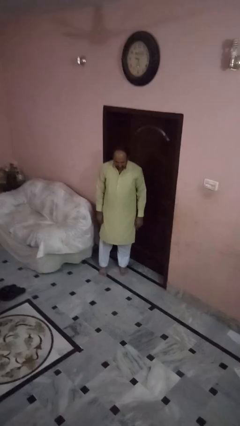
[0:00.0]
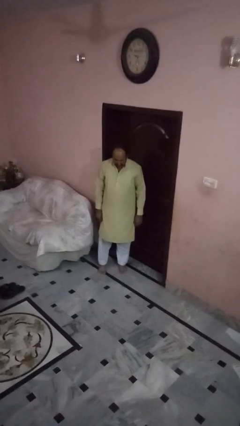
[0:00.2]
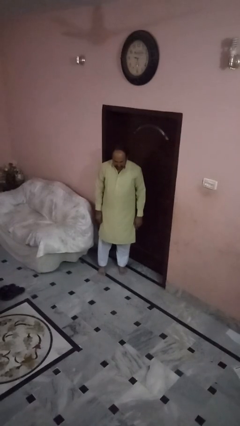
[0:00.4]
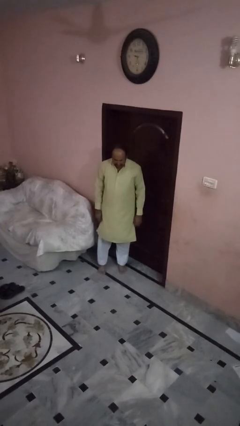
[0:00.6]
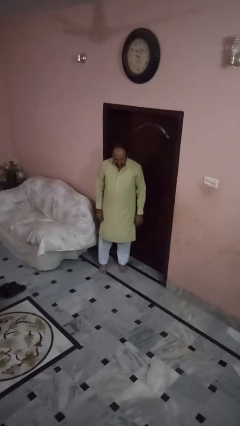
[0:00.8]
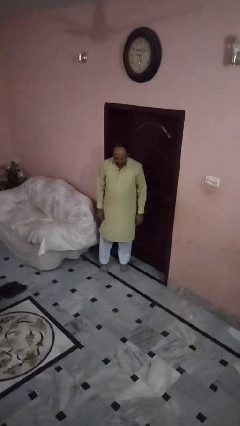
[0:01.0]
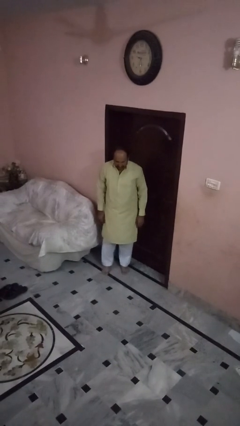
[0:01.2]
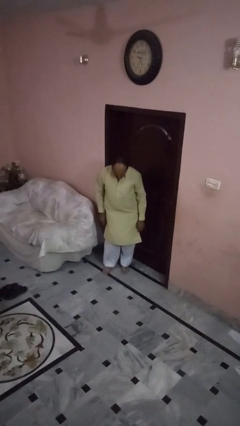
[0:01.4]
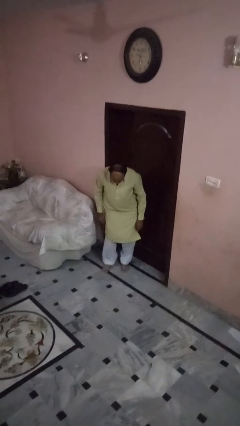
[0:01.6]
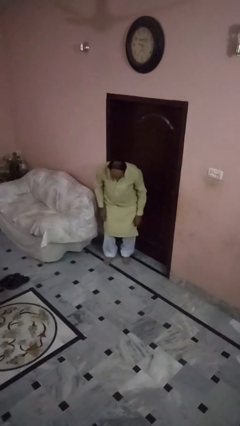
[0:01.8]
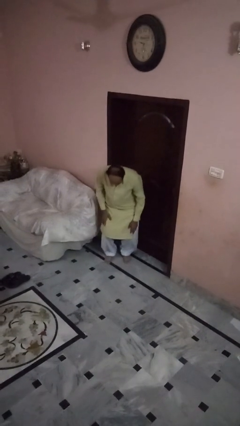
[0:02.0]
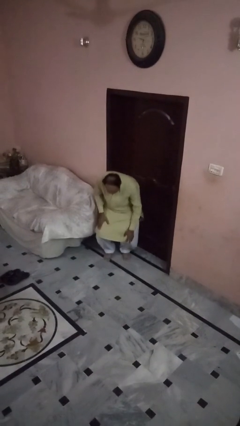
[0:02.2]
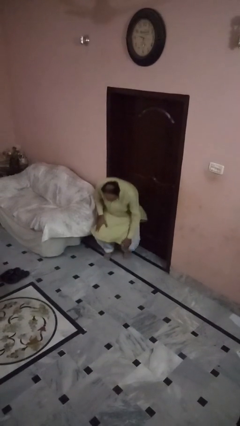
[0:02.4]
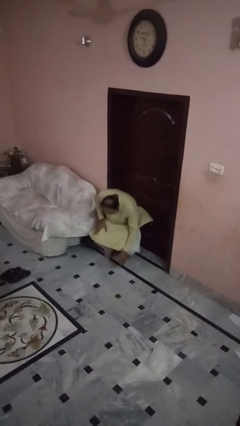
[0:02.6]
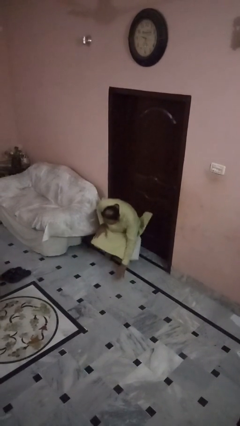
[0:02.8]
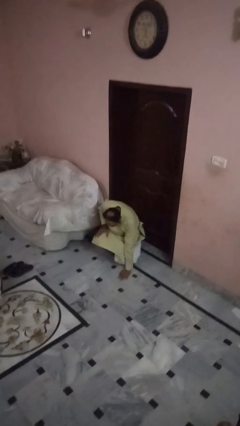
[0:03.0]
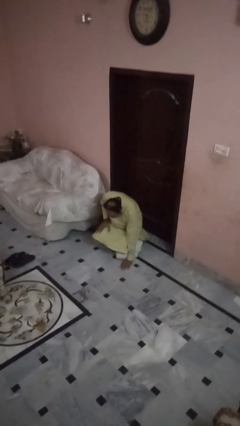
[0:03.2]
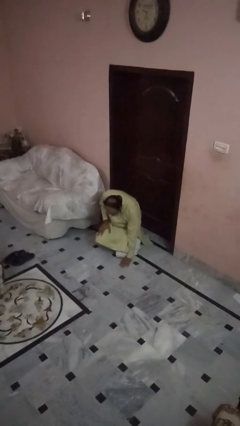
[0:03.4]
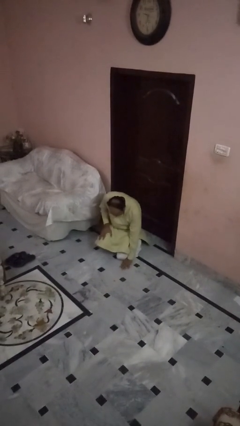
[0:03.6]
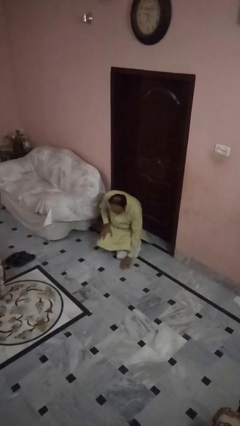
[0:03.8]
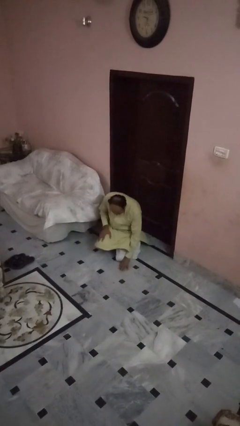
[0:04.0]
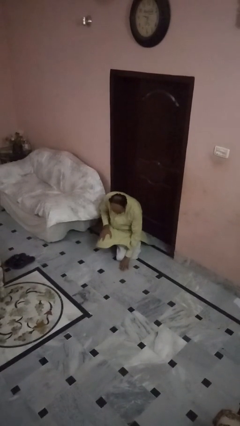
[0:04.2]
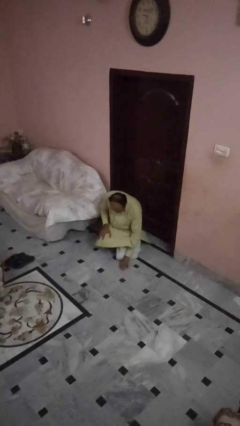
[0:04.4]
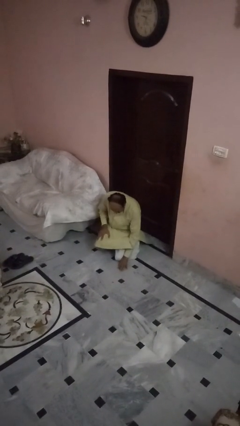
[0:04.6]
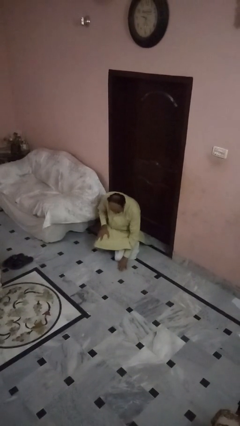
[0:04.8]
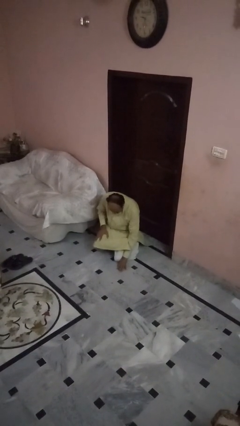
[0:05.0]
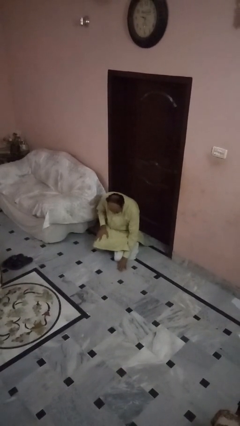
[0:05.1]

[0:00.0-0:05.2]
person falls while standing

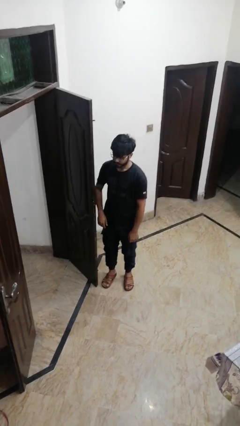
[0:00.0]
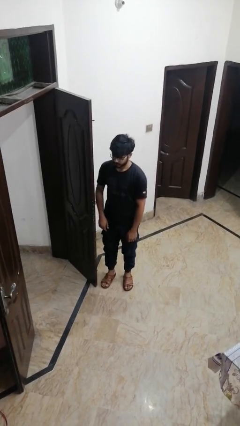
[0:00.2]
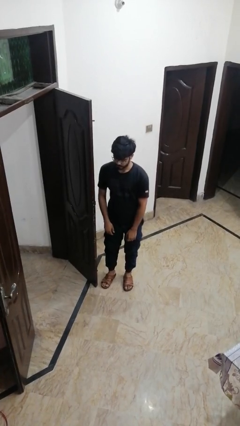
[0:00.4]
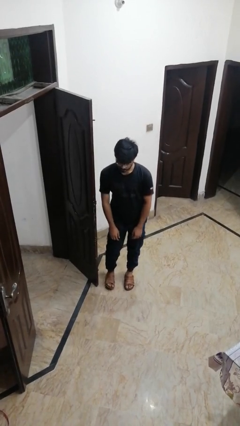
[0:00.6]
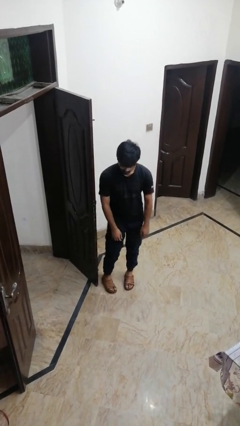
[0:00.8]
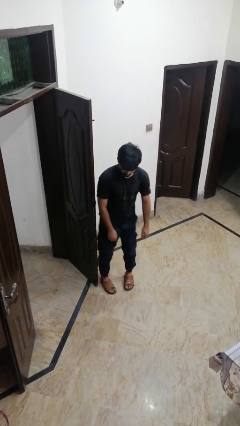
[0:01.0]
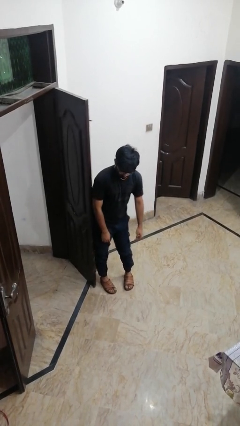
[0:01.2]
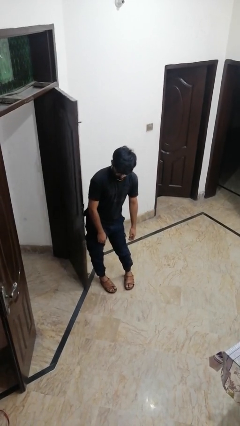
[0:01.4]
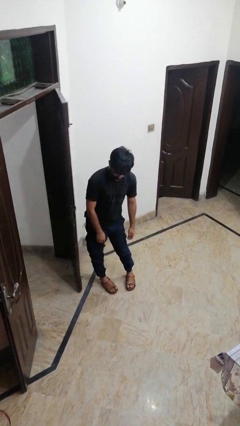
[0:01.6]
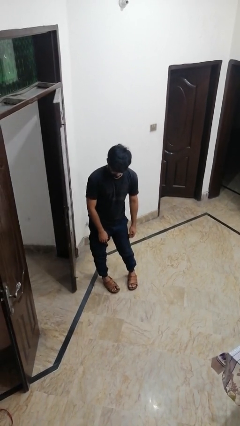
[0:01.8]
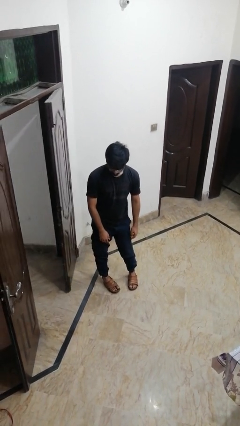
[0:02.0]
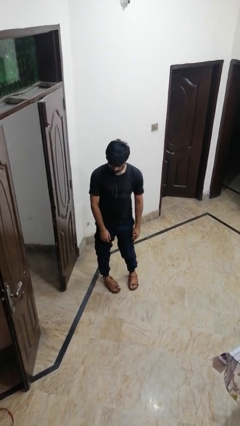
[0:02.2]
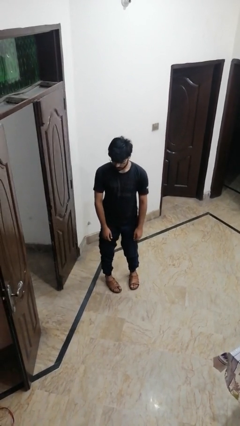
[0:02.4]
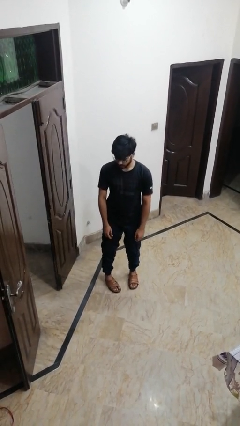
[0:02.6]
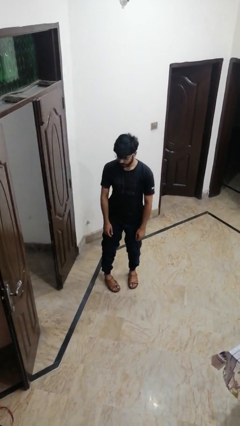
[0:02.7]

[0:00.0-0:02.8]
person closes door with hip

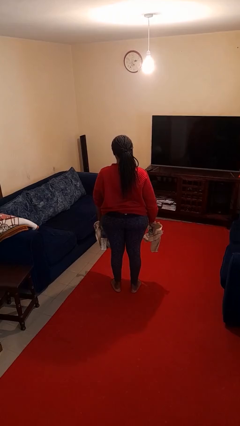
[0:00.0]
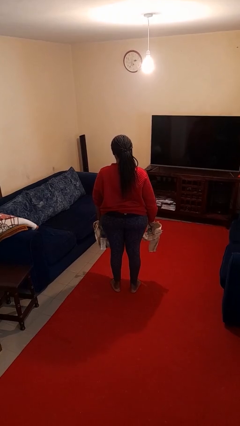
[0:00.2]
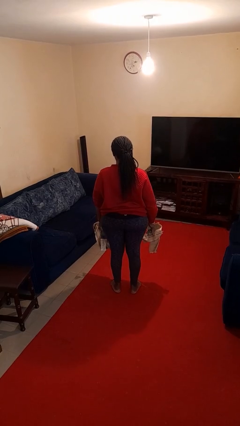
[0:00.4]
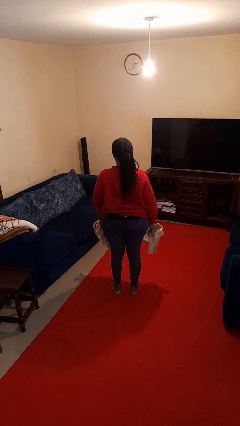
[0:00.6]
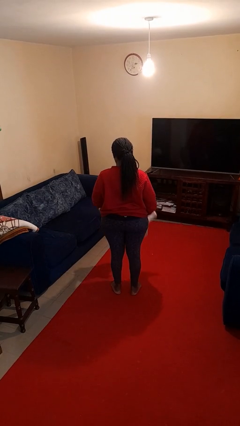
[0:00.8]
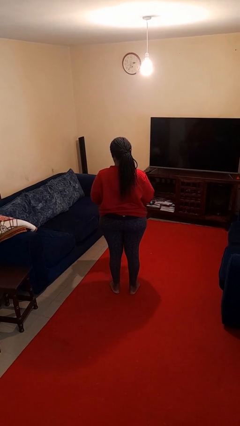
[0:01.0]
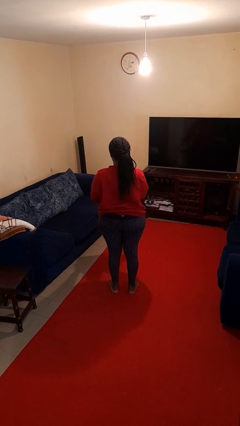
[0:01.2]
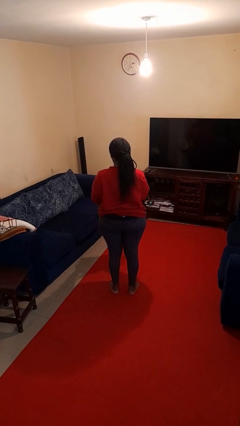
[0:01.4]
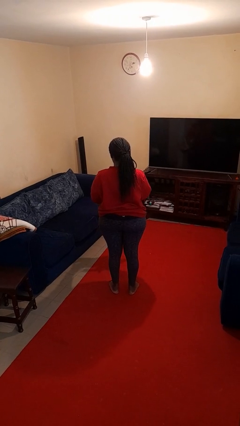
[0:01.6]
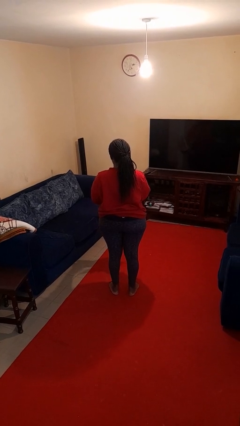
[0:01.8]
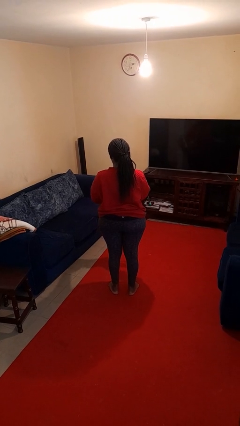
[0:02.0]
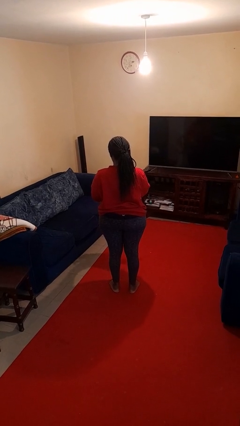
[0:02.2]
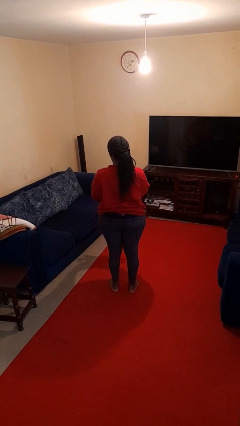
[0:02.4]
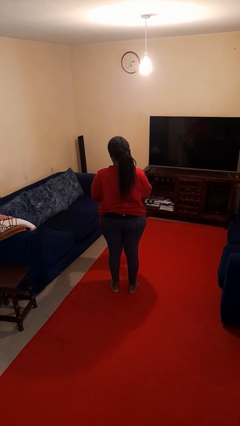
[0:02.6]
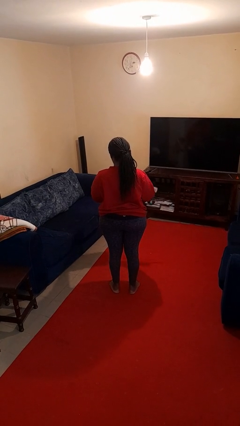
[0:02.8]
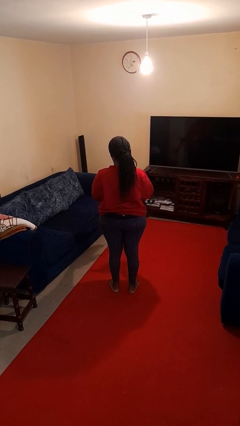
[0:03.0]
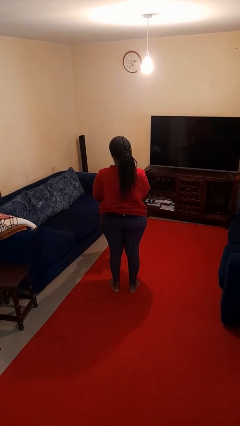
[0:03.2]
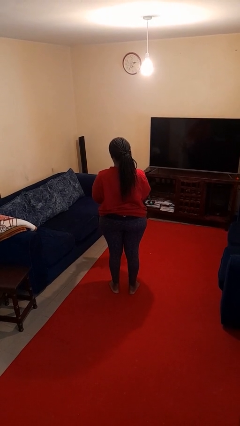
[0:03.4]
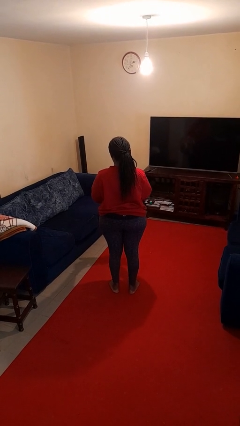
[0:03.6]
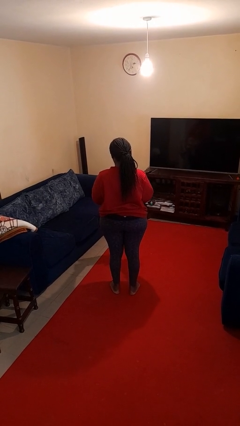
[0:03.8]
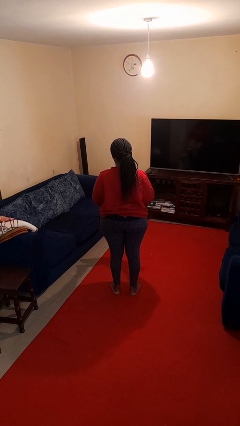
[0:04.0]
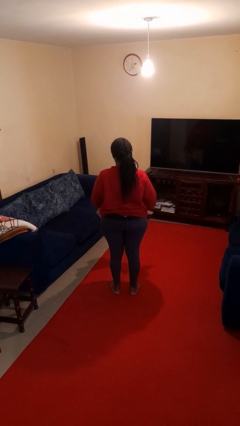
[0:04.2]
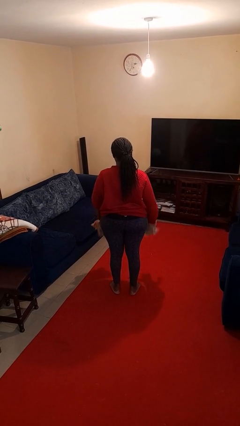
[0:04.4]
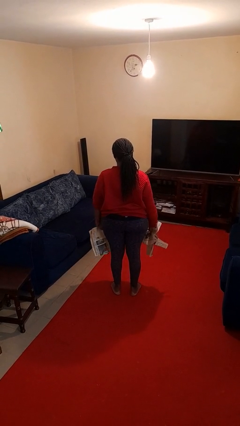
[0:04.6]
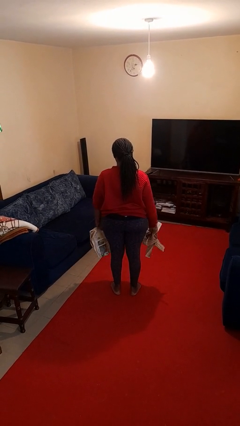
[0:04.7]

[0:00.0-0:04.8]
person tears paper

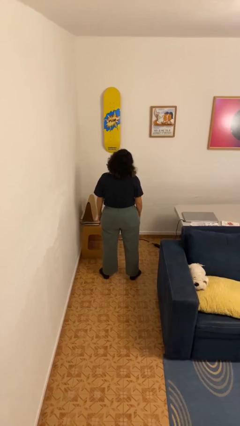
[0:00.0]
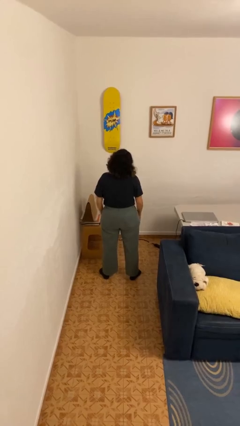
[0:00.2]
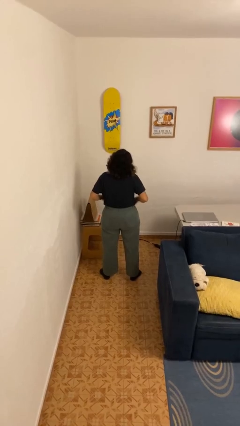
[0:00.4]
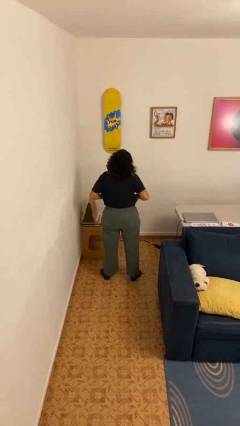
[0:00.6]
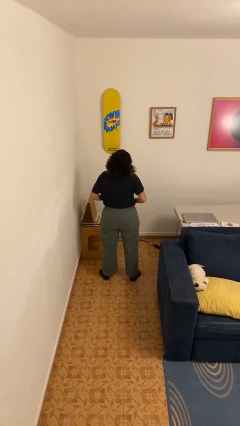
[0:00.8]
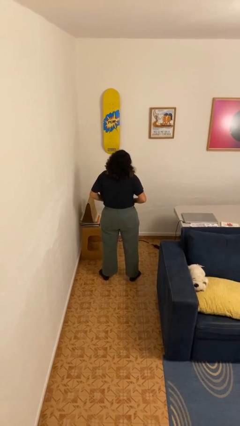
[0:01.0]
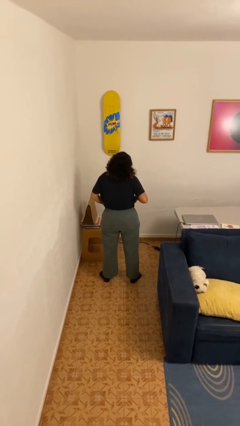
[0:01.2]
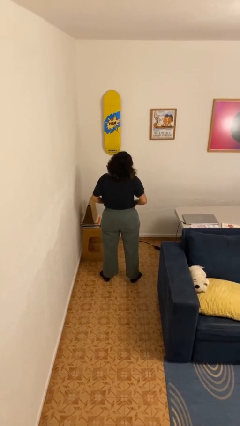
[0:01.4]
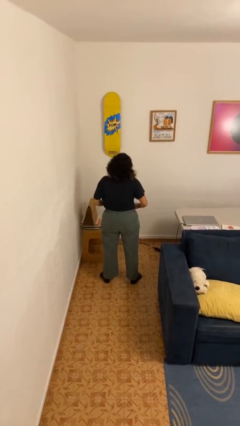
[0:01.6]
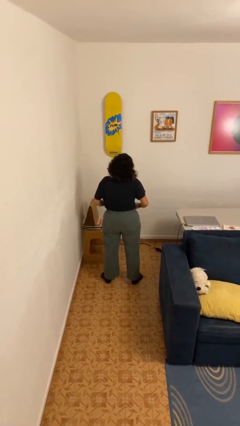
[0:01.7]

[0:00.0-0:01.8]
person puts hands in back pockets

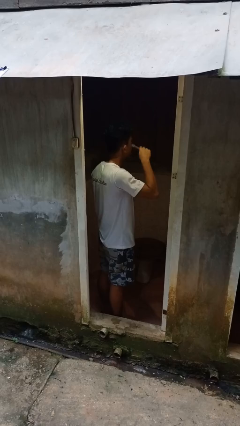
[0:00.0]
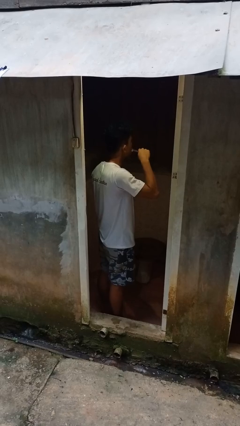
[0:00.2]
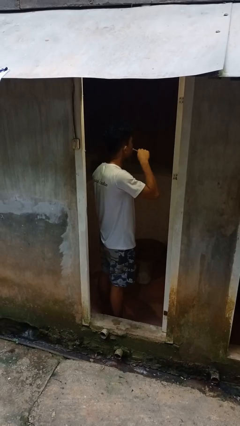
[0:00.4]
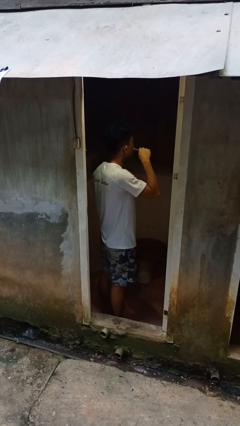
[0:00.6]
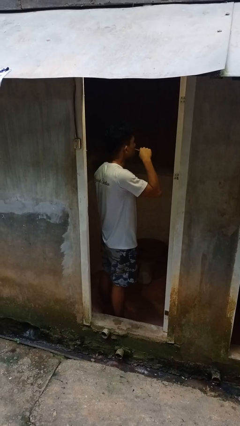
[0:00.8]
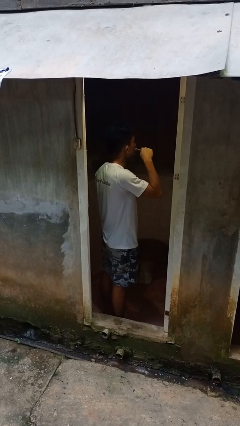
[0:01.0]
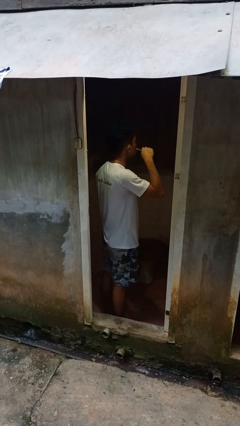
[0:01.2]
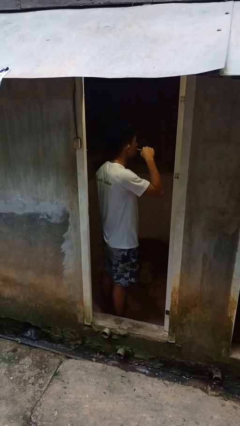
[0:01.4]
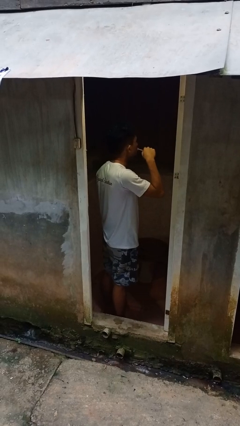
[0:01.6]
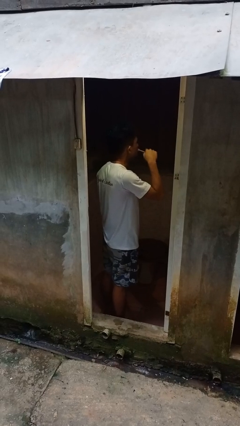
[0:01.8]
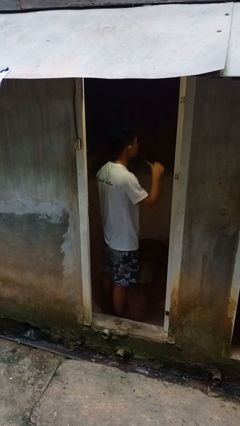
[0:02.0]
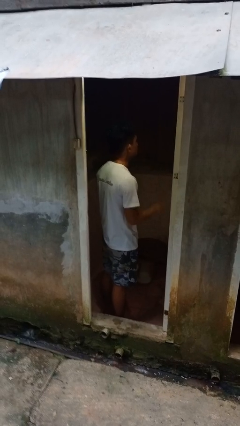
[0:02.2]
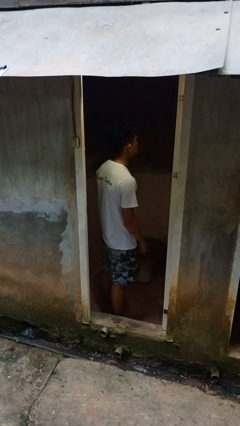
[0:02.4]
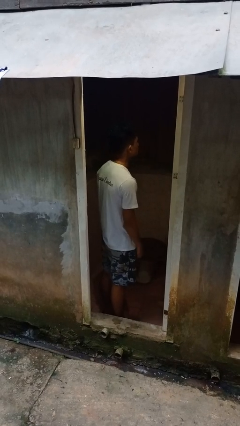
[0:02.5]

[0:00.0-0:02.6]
person brushes teeth
